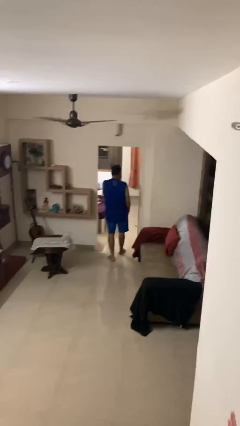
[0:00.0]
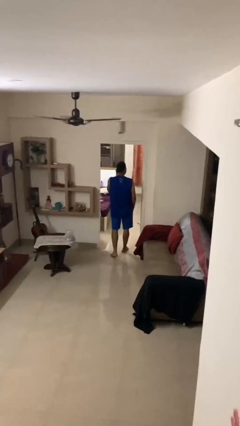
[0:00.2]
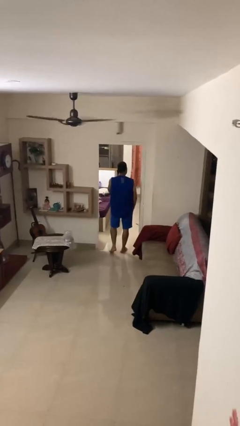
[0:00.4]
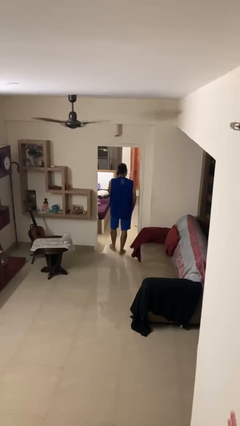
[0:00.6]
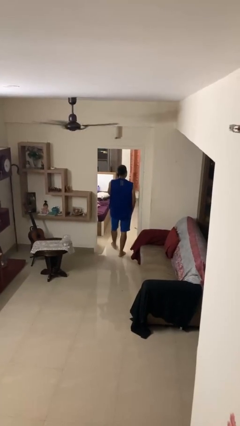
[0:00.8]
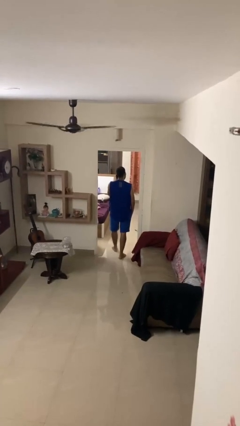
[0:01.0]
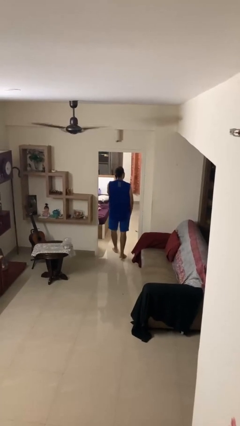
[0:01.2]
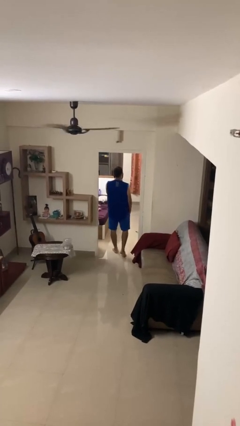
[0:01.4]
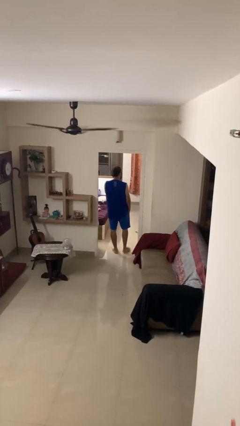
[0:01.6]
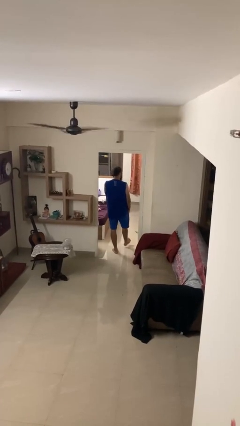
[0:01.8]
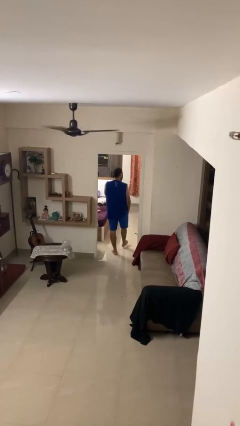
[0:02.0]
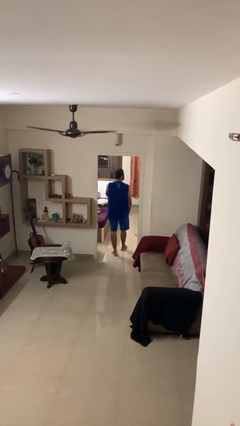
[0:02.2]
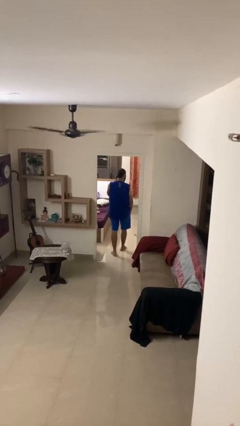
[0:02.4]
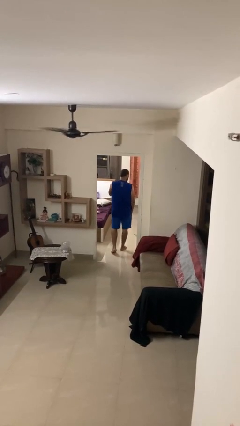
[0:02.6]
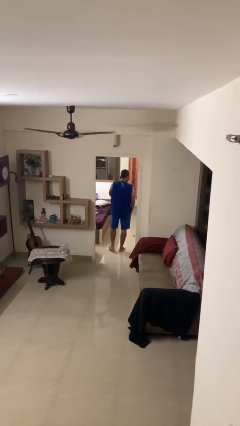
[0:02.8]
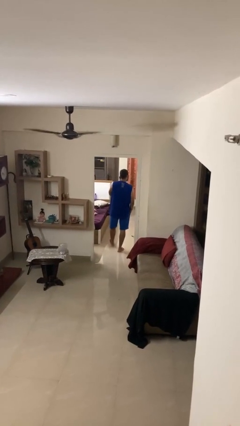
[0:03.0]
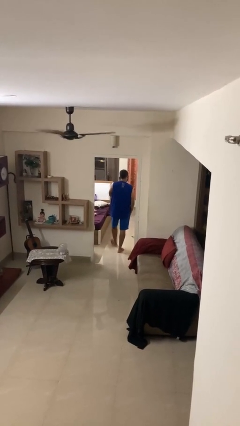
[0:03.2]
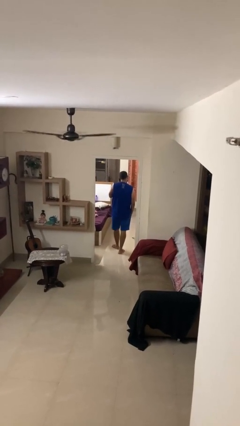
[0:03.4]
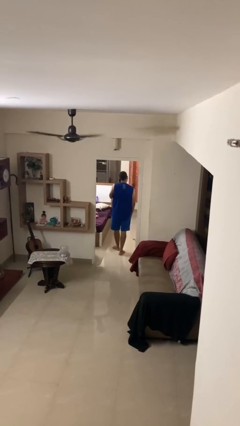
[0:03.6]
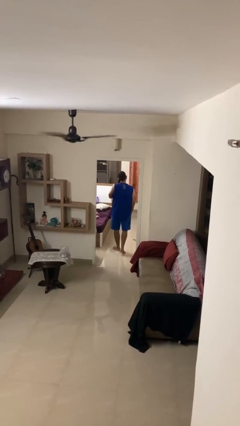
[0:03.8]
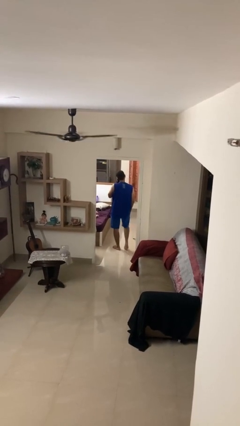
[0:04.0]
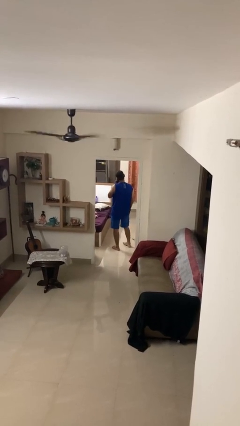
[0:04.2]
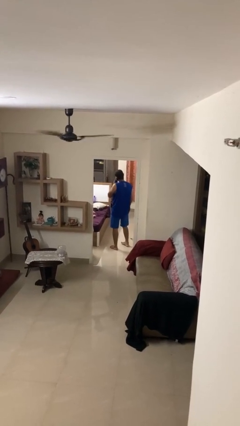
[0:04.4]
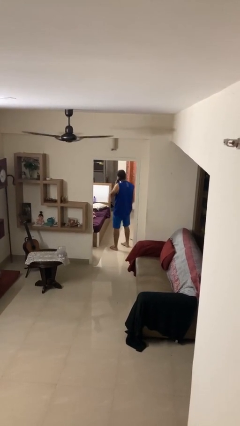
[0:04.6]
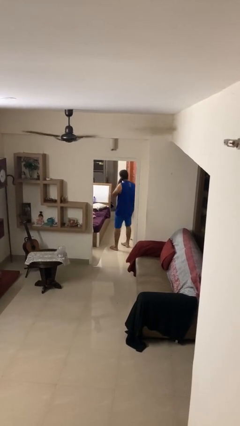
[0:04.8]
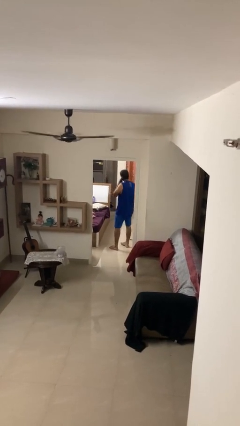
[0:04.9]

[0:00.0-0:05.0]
person exits scene through structure

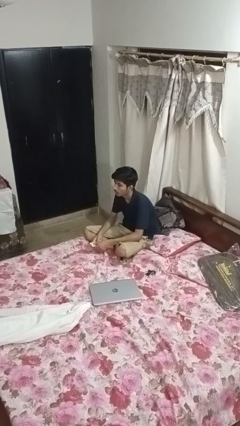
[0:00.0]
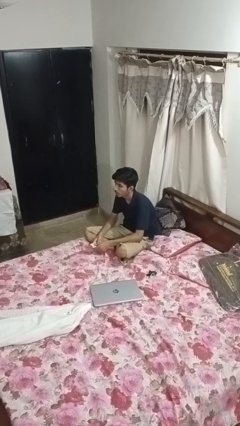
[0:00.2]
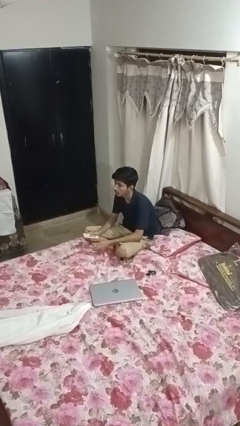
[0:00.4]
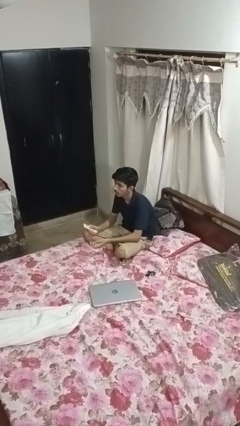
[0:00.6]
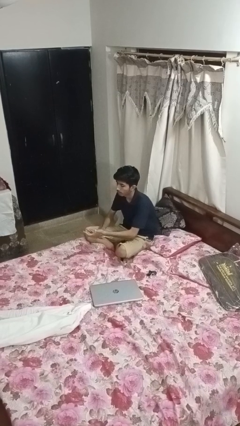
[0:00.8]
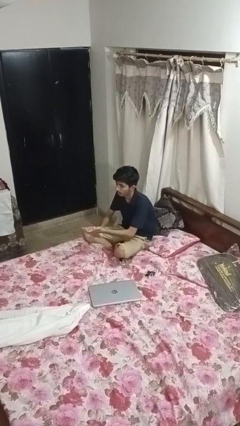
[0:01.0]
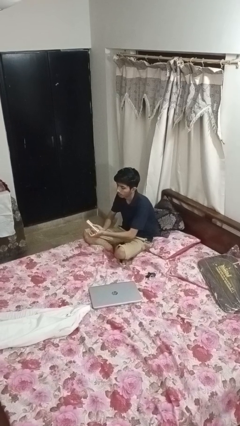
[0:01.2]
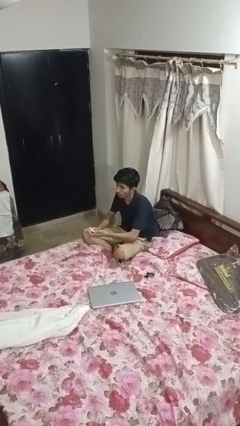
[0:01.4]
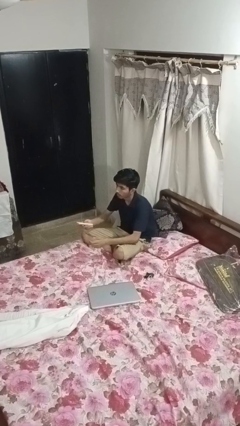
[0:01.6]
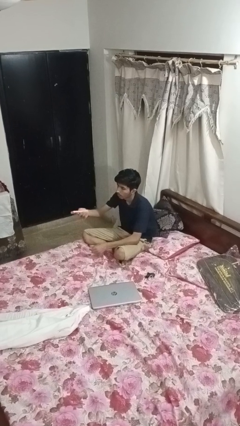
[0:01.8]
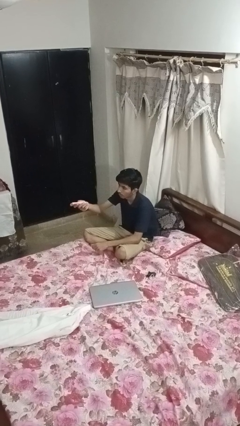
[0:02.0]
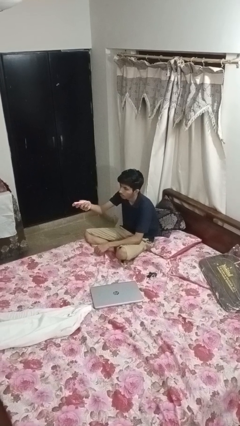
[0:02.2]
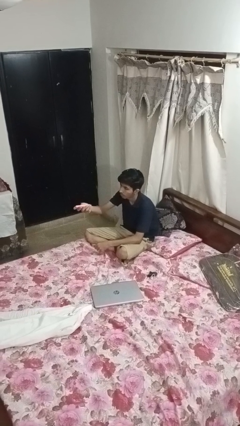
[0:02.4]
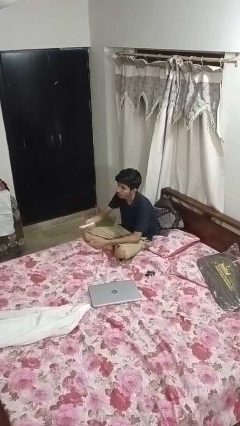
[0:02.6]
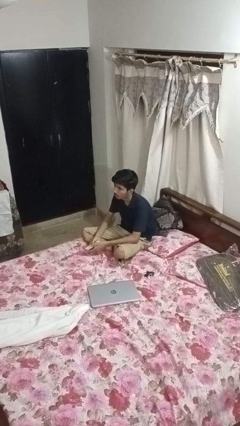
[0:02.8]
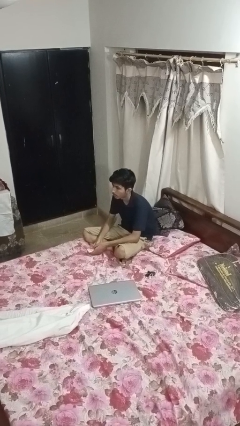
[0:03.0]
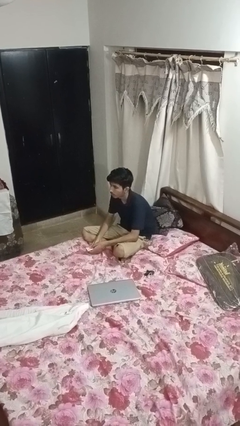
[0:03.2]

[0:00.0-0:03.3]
person uses television remote

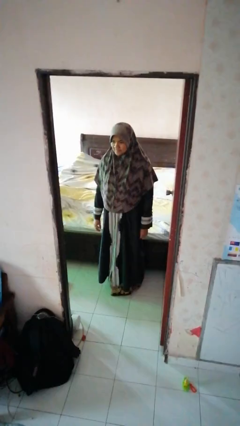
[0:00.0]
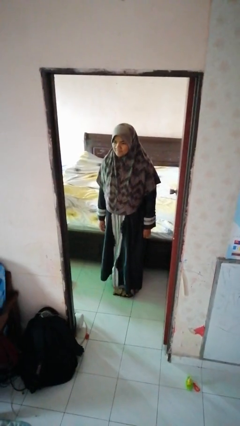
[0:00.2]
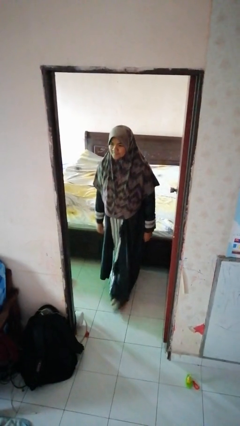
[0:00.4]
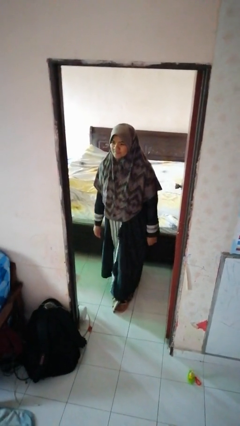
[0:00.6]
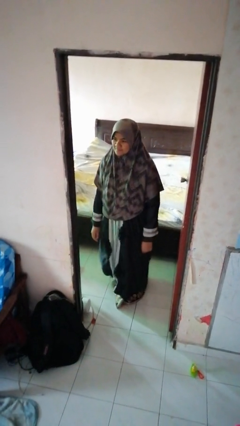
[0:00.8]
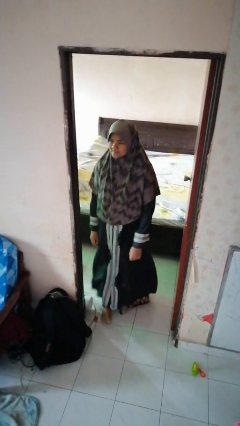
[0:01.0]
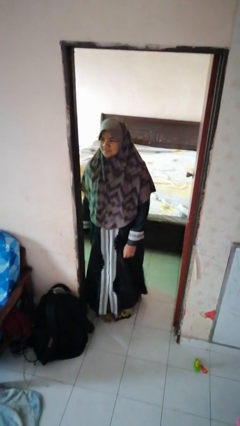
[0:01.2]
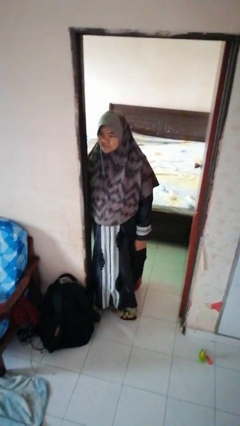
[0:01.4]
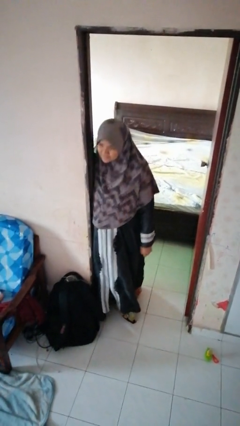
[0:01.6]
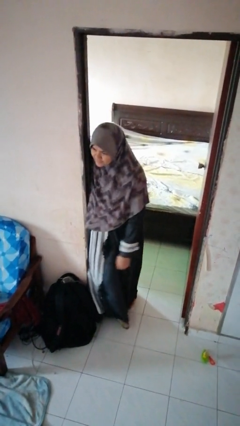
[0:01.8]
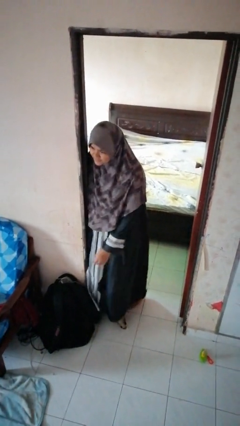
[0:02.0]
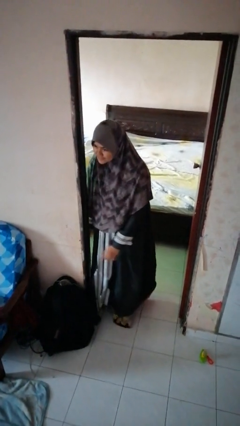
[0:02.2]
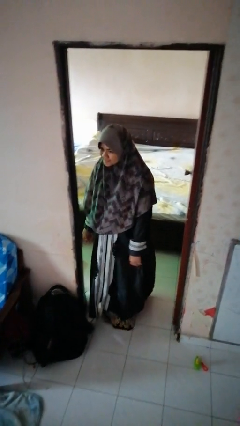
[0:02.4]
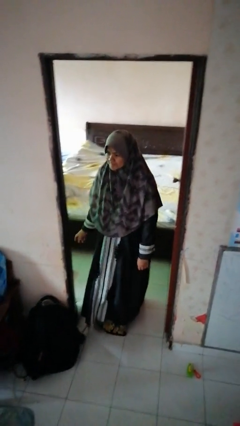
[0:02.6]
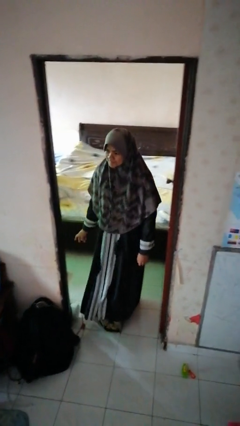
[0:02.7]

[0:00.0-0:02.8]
person bumps into wall

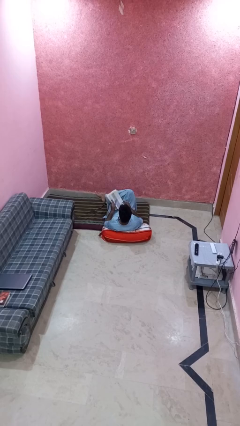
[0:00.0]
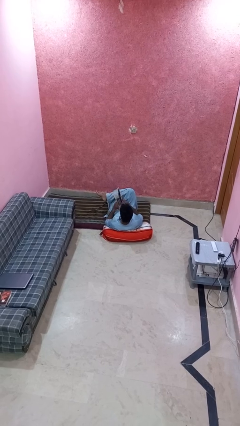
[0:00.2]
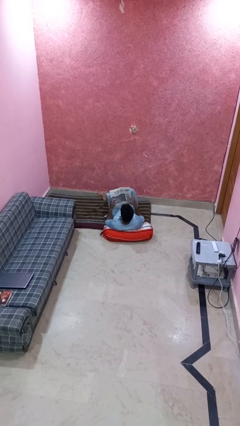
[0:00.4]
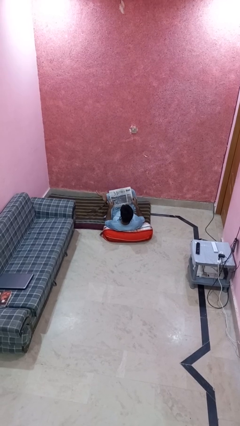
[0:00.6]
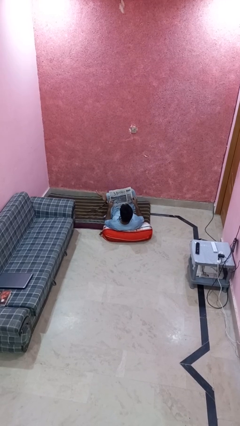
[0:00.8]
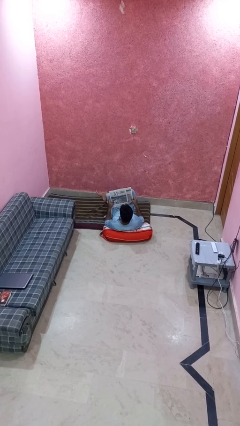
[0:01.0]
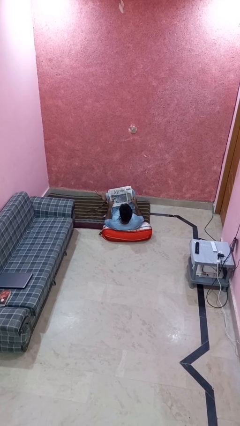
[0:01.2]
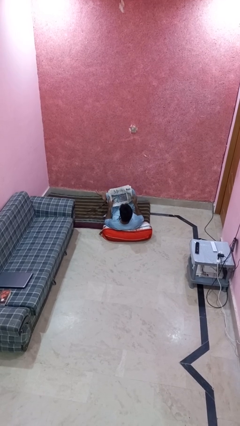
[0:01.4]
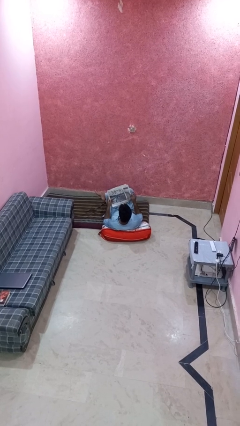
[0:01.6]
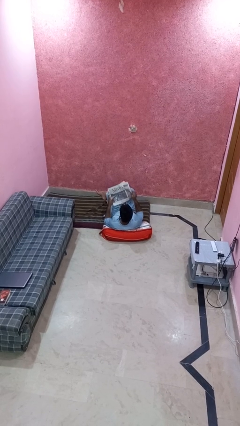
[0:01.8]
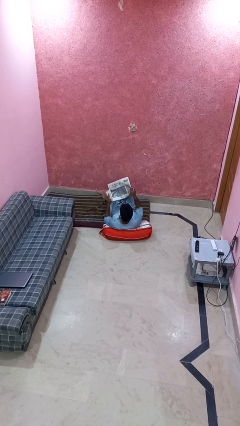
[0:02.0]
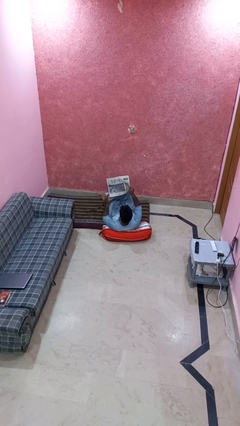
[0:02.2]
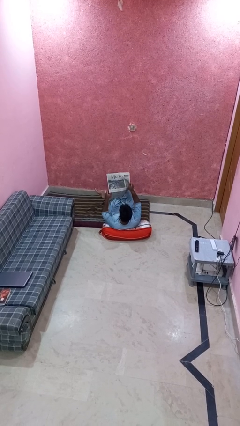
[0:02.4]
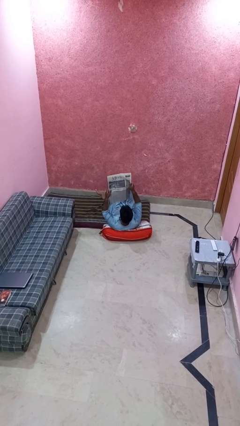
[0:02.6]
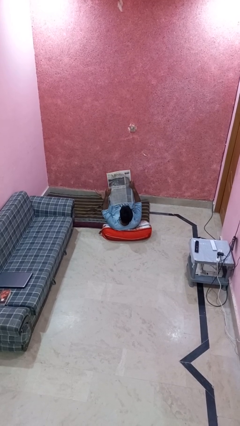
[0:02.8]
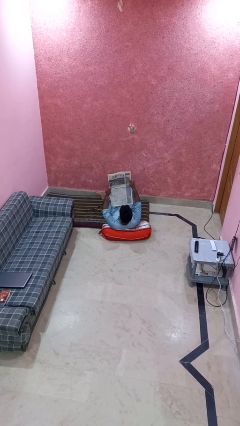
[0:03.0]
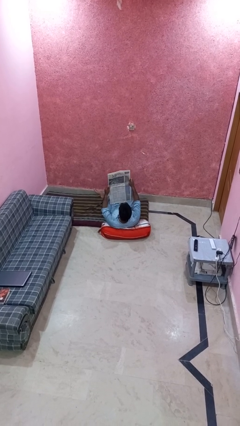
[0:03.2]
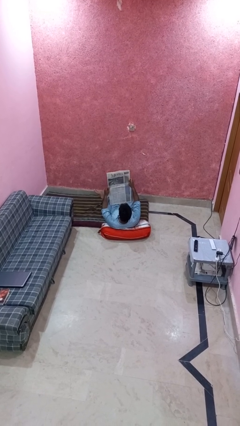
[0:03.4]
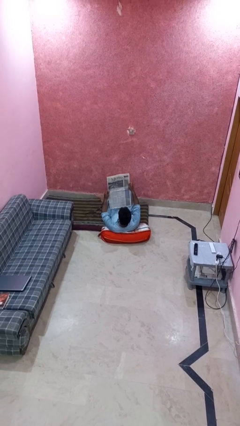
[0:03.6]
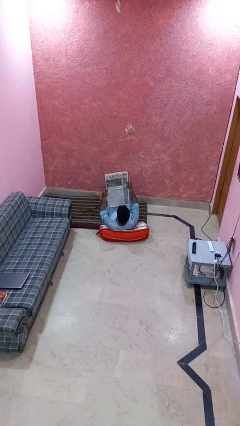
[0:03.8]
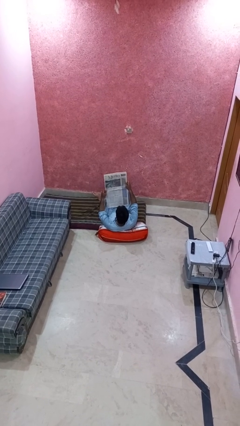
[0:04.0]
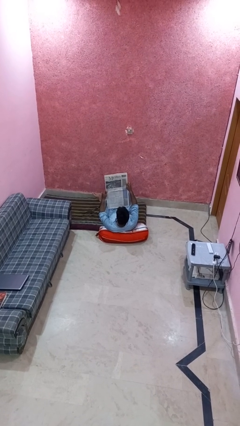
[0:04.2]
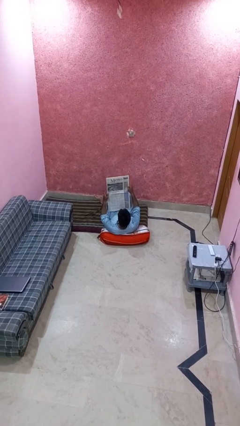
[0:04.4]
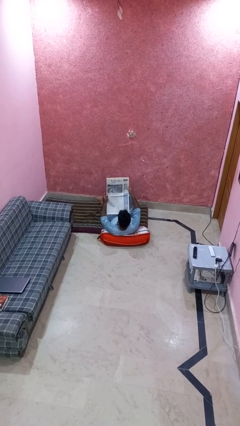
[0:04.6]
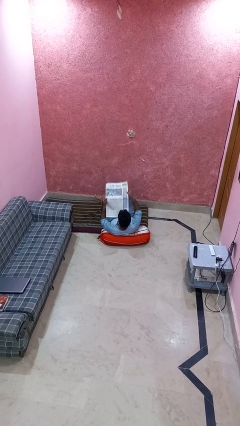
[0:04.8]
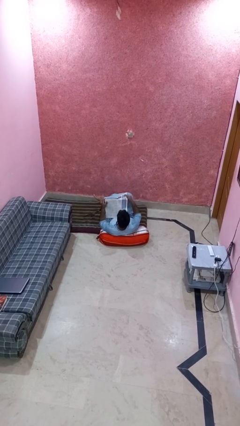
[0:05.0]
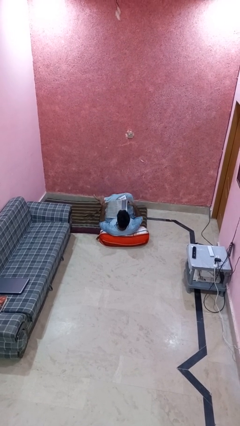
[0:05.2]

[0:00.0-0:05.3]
person reads newspaper

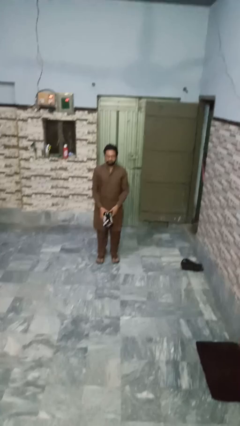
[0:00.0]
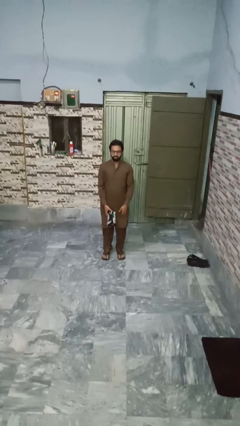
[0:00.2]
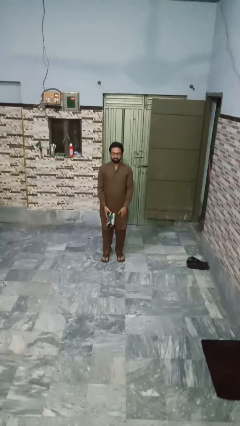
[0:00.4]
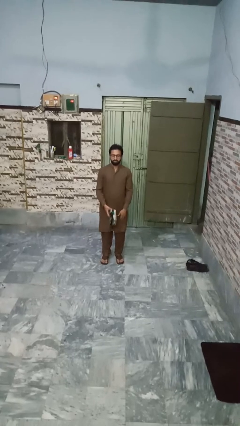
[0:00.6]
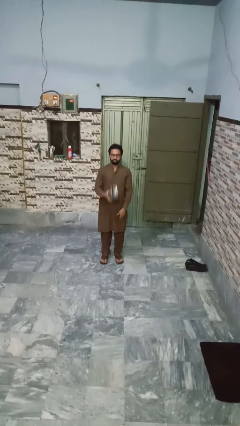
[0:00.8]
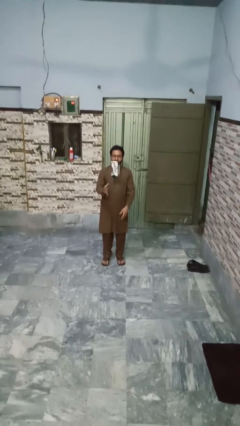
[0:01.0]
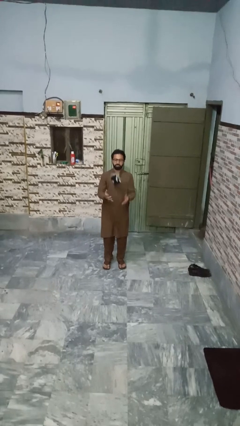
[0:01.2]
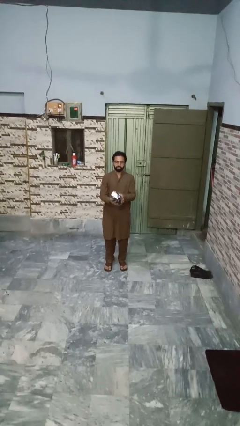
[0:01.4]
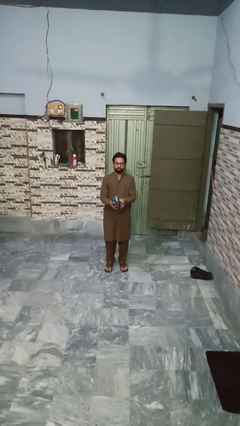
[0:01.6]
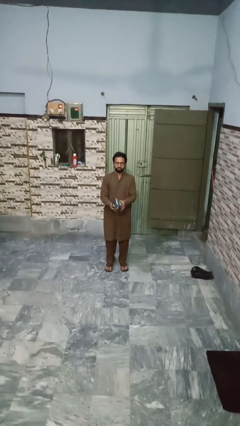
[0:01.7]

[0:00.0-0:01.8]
person drops object
